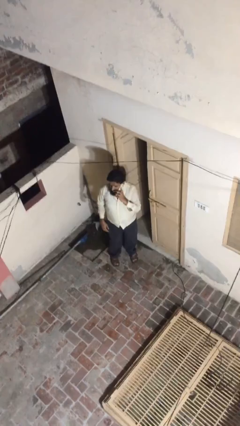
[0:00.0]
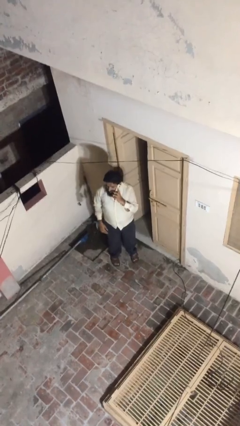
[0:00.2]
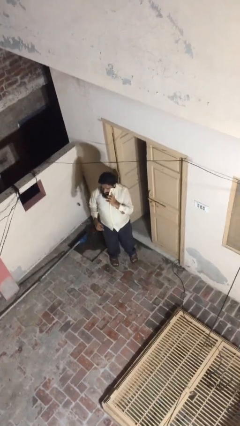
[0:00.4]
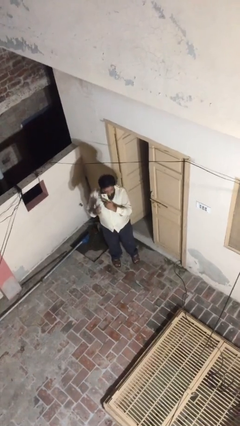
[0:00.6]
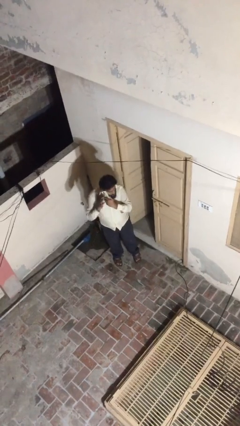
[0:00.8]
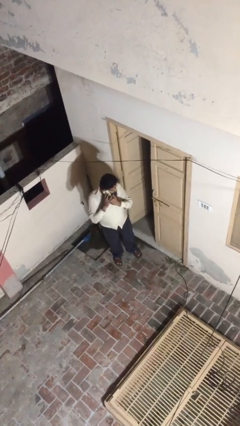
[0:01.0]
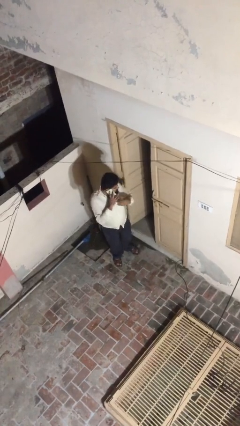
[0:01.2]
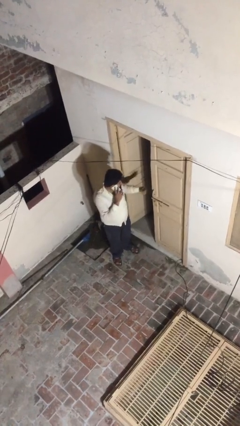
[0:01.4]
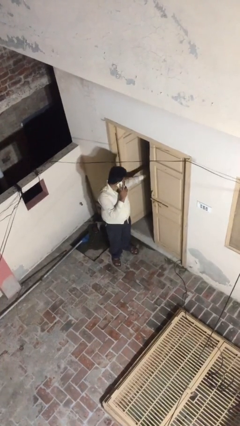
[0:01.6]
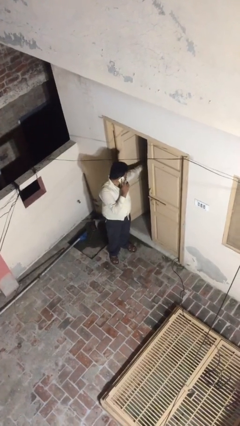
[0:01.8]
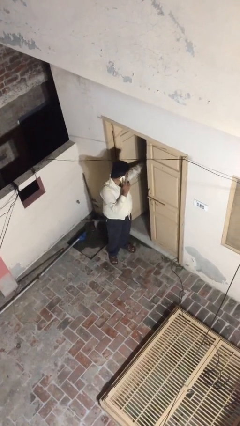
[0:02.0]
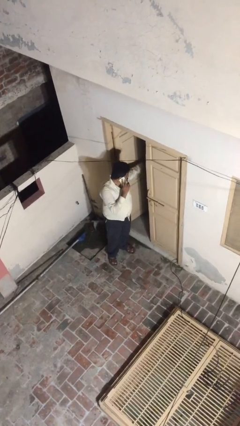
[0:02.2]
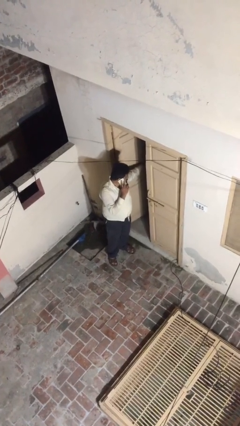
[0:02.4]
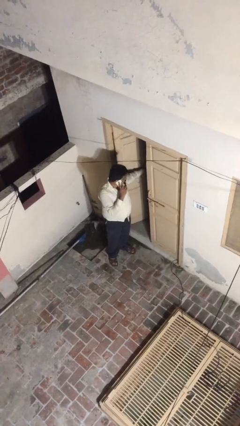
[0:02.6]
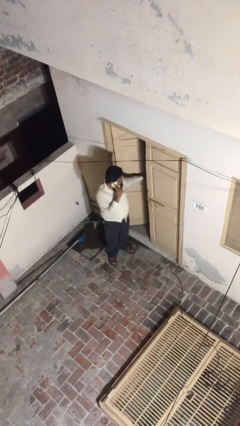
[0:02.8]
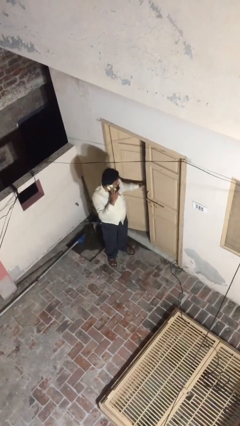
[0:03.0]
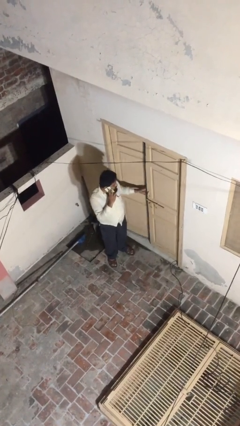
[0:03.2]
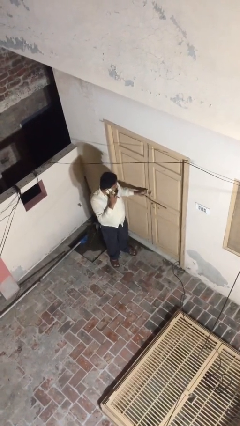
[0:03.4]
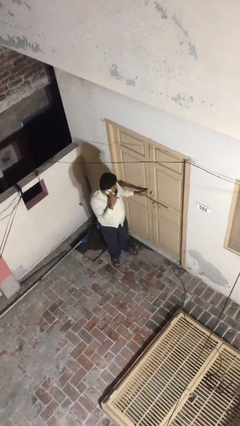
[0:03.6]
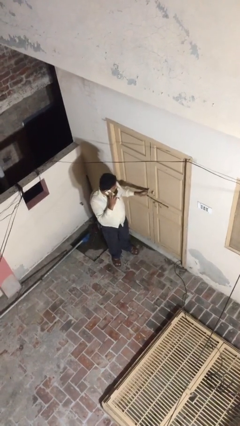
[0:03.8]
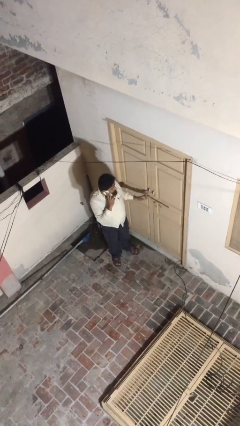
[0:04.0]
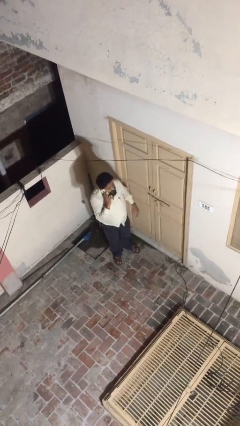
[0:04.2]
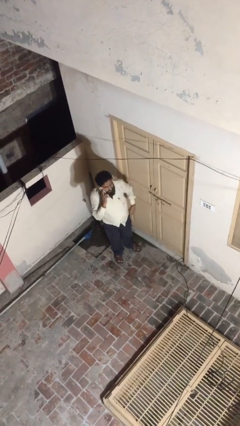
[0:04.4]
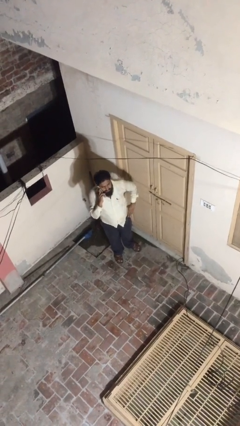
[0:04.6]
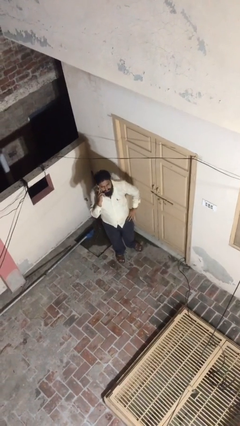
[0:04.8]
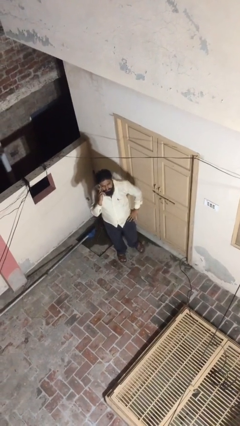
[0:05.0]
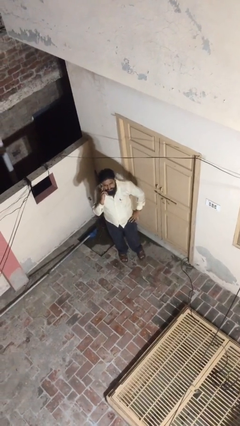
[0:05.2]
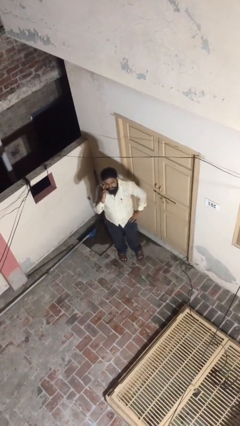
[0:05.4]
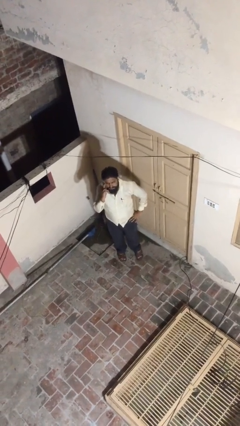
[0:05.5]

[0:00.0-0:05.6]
person closes facility door

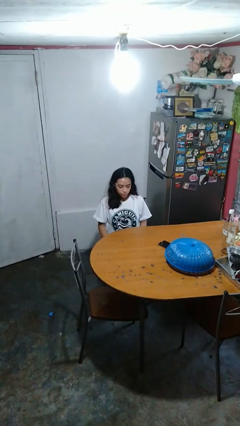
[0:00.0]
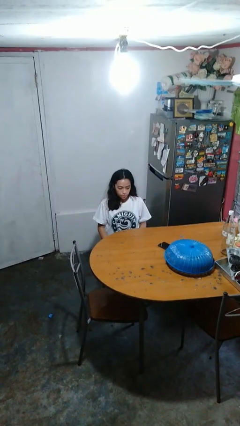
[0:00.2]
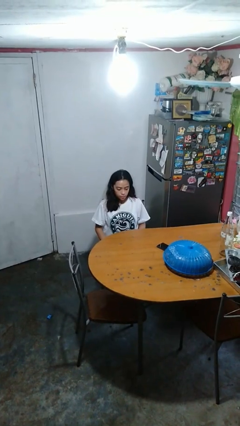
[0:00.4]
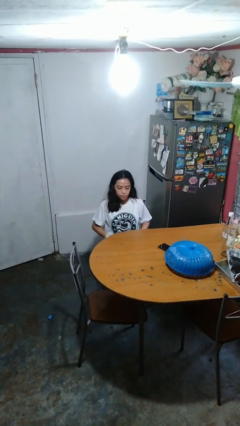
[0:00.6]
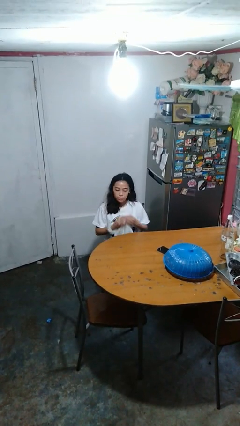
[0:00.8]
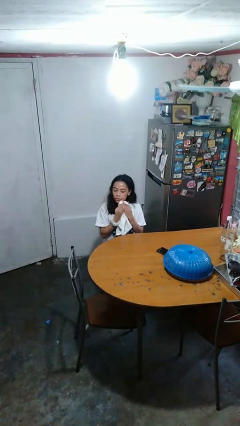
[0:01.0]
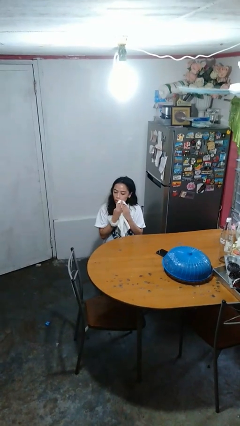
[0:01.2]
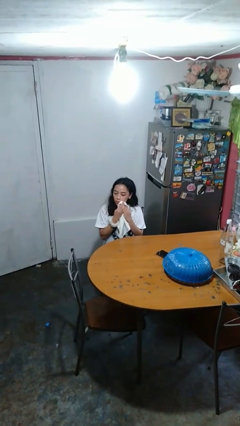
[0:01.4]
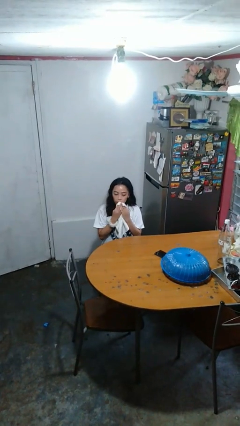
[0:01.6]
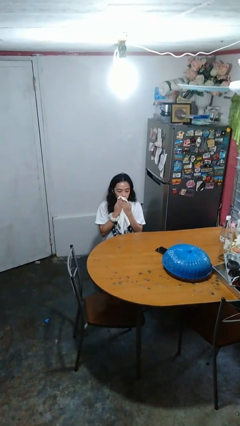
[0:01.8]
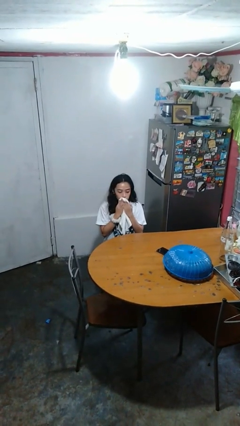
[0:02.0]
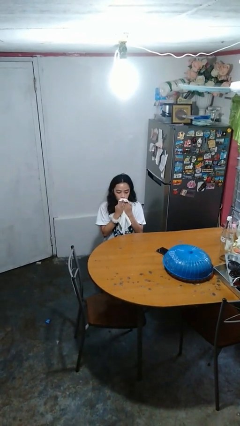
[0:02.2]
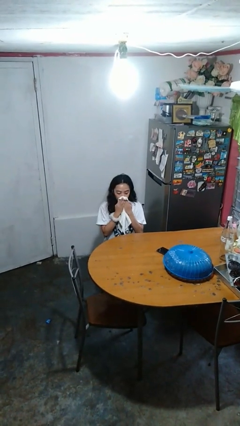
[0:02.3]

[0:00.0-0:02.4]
person wipes mouth with napkin

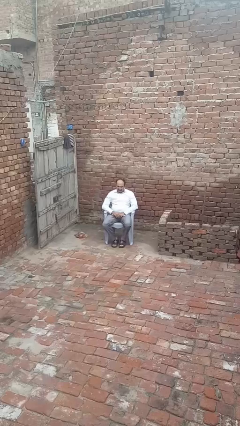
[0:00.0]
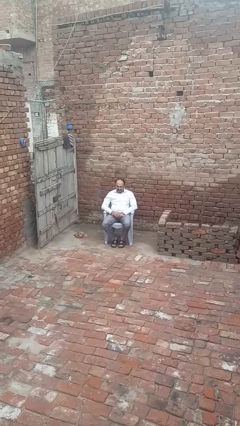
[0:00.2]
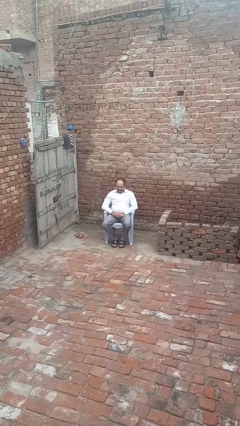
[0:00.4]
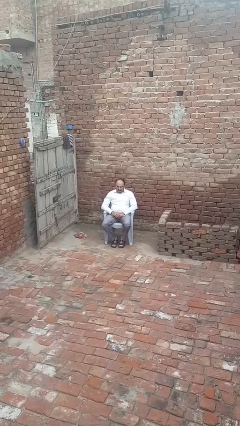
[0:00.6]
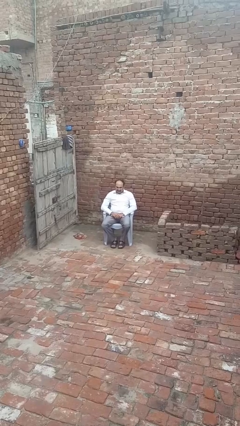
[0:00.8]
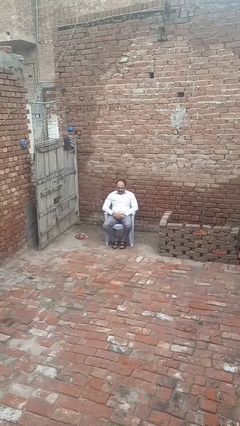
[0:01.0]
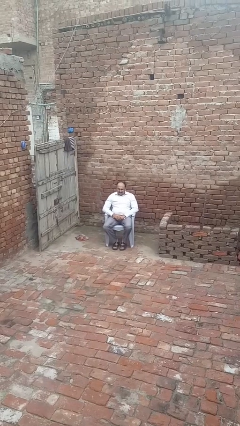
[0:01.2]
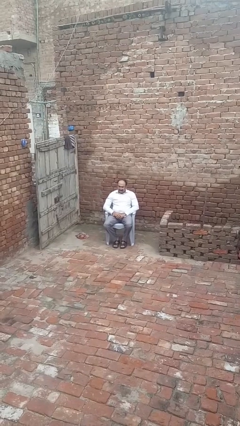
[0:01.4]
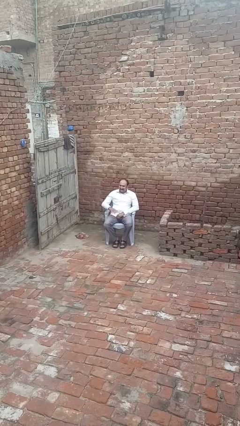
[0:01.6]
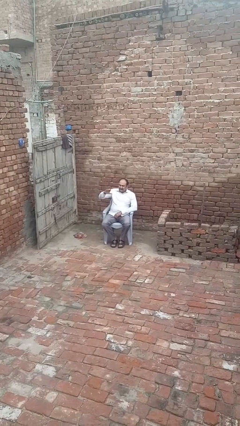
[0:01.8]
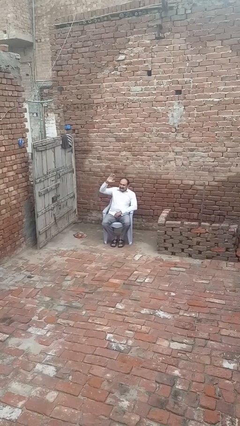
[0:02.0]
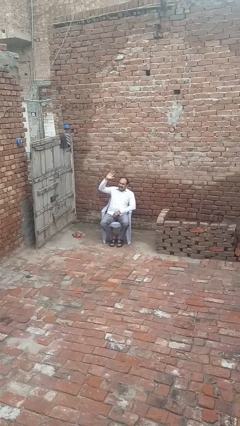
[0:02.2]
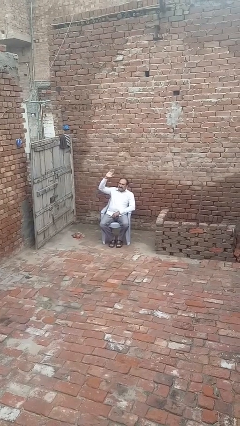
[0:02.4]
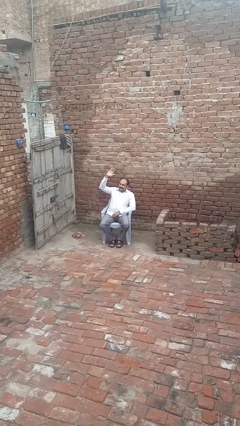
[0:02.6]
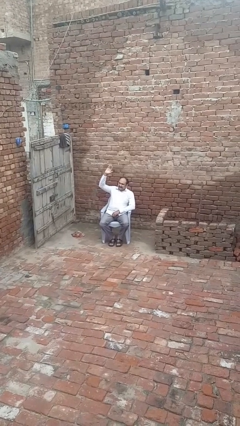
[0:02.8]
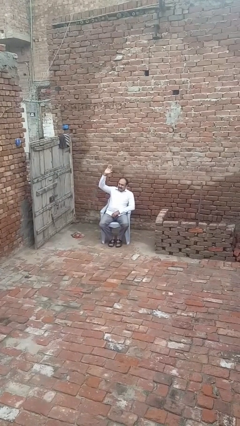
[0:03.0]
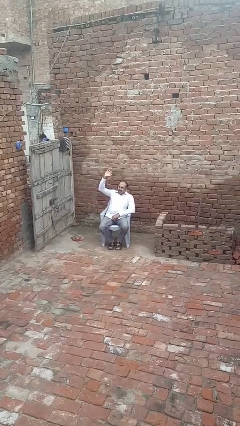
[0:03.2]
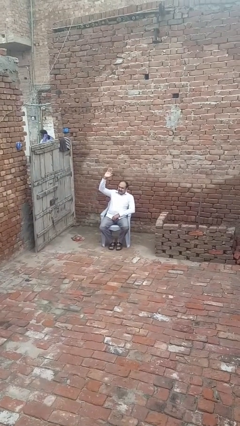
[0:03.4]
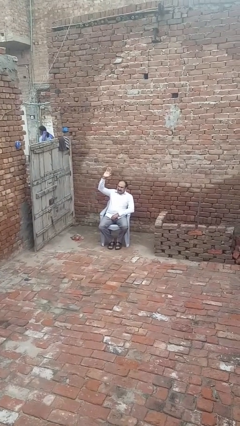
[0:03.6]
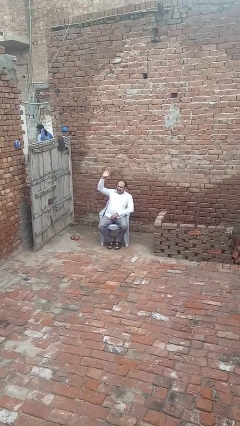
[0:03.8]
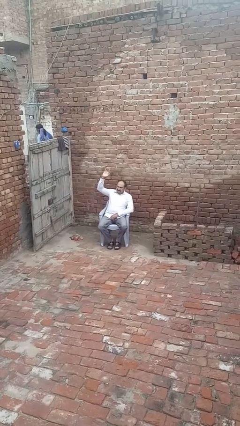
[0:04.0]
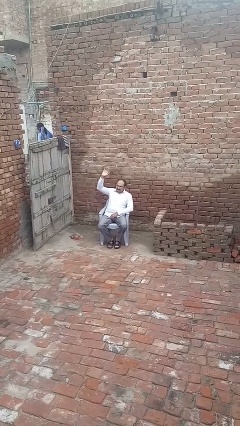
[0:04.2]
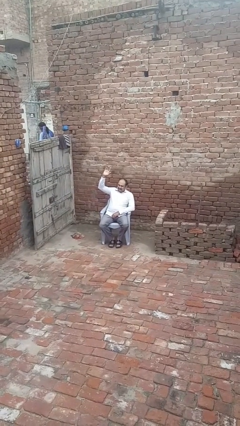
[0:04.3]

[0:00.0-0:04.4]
person gestures raise hand

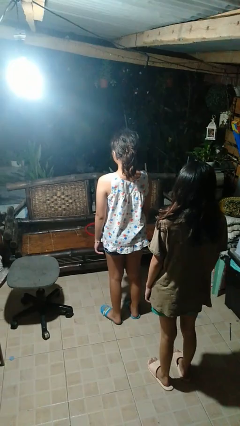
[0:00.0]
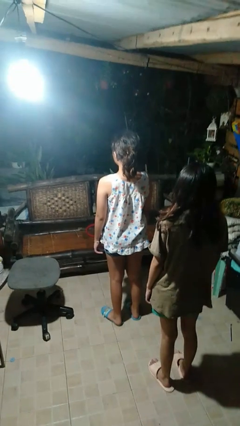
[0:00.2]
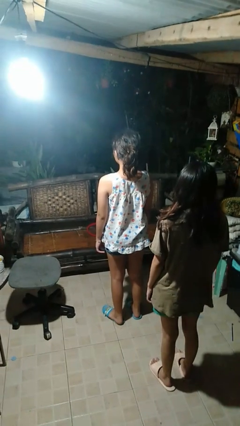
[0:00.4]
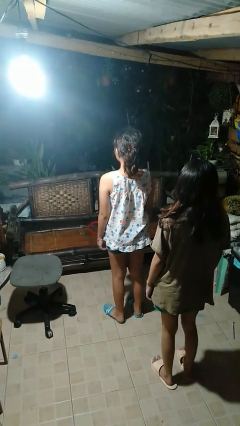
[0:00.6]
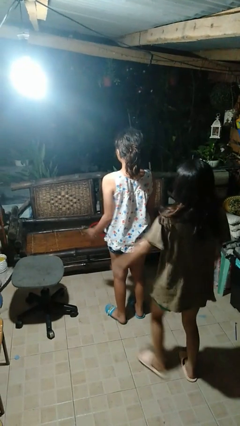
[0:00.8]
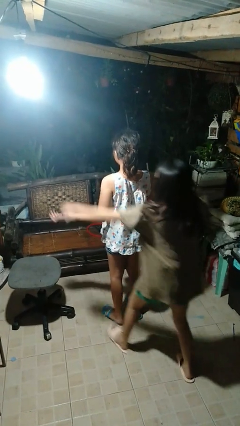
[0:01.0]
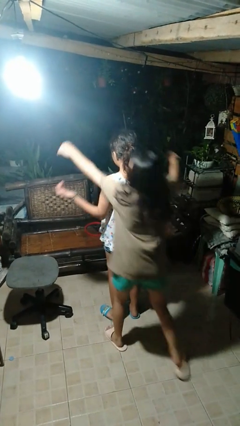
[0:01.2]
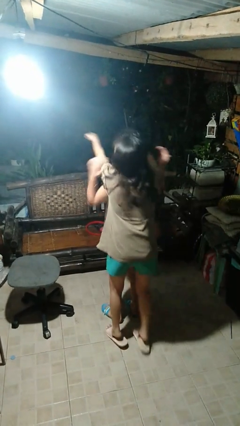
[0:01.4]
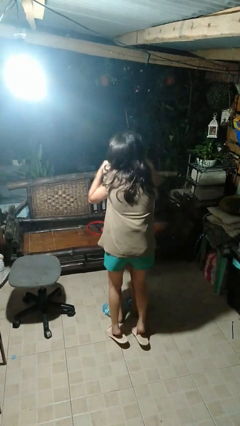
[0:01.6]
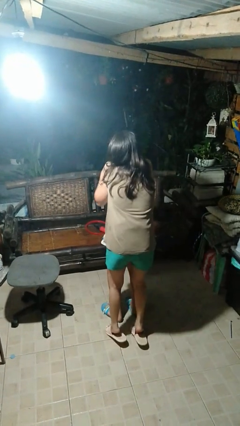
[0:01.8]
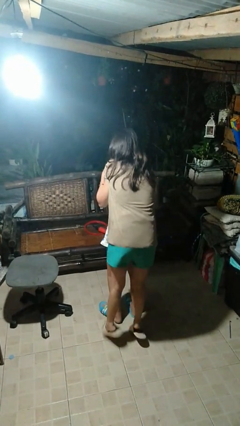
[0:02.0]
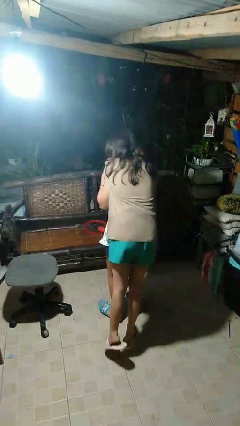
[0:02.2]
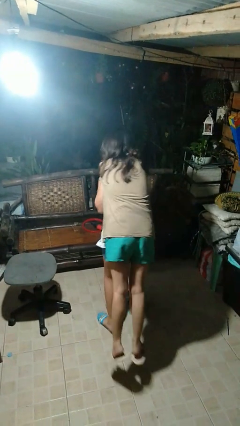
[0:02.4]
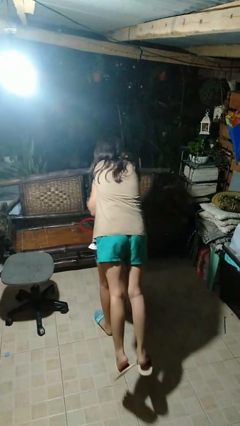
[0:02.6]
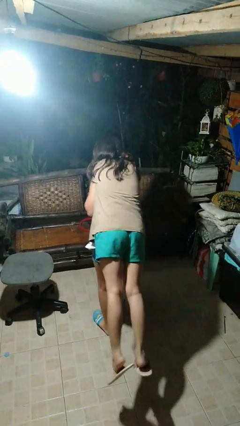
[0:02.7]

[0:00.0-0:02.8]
person carries person on back

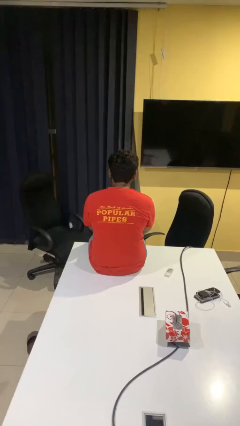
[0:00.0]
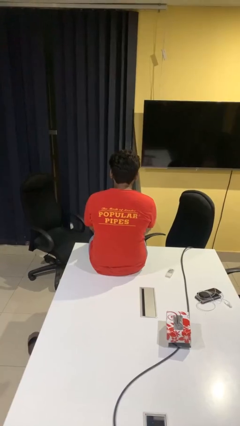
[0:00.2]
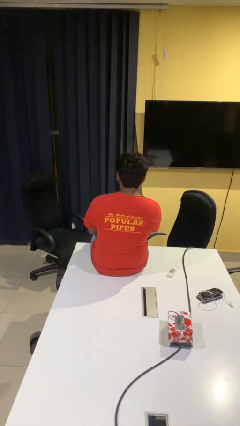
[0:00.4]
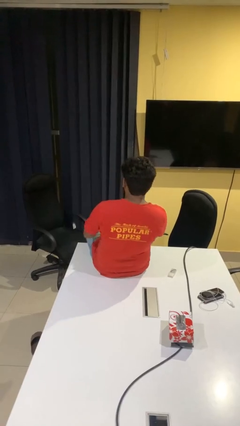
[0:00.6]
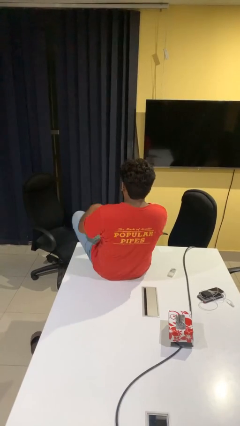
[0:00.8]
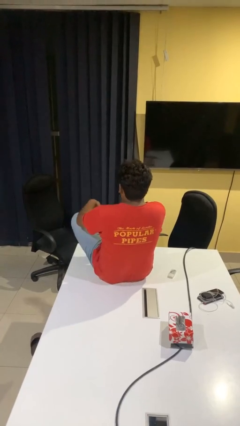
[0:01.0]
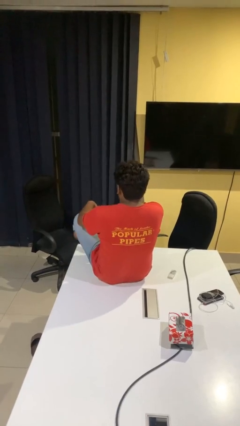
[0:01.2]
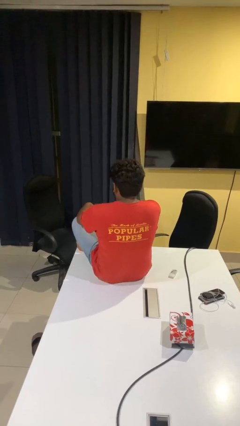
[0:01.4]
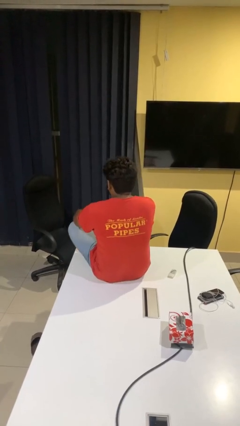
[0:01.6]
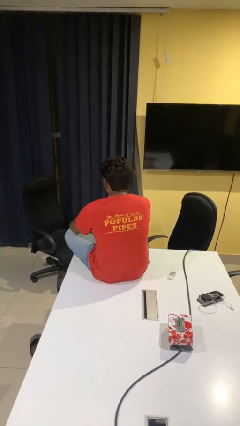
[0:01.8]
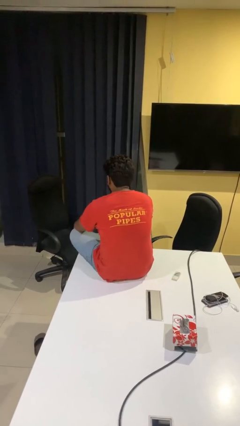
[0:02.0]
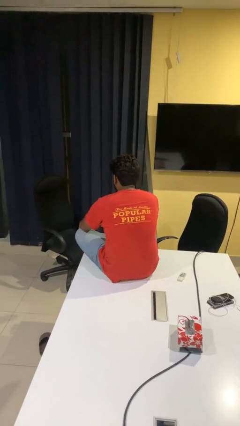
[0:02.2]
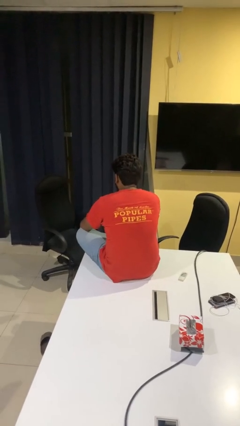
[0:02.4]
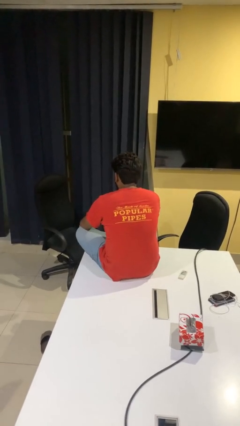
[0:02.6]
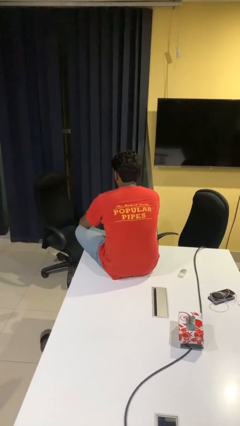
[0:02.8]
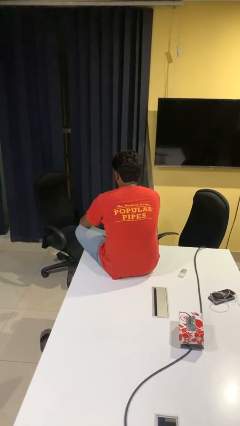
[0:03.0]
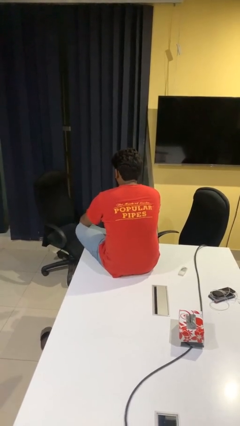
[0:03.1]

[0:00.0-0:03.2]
person puts feet up
